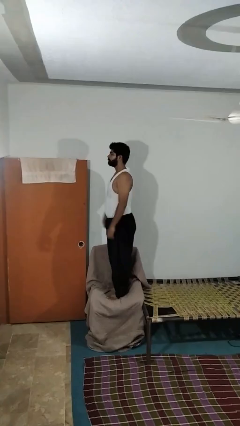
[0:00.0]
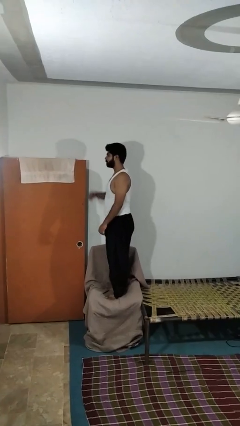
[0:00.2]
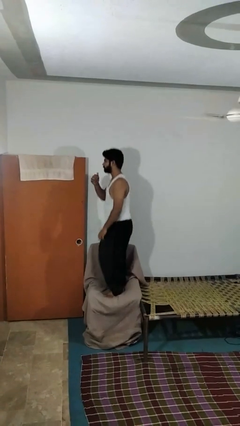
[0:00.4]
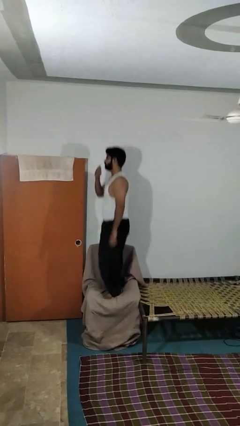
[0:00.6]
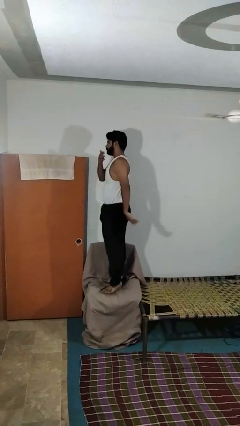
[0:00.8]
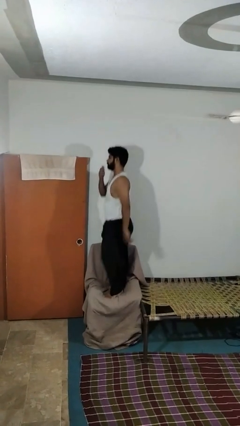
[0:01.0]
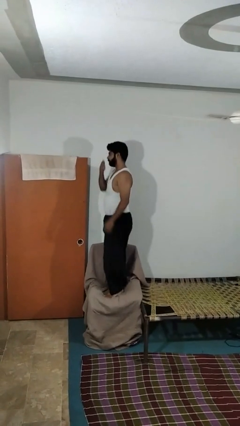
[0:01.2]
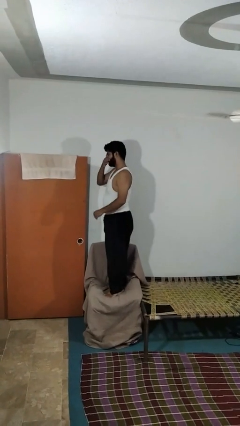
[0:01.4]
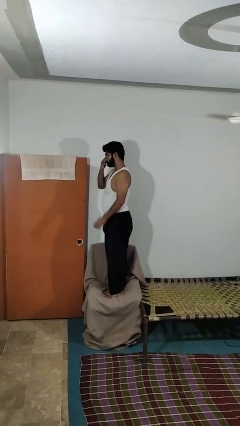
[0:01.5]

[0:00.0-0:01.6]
person jumps on couch

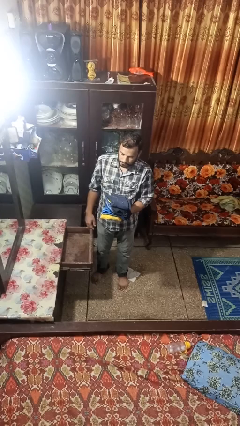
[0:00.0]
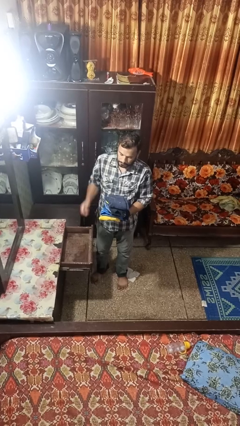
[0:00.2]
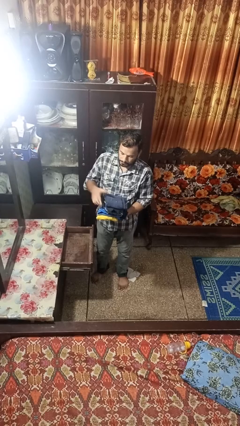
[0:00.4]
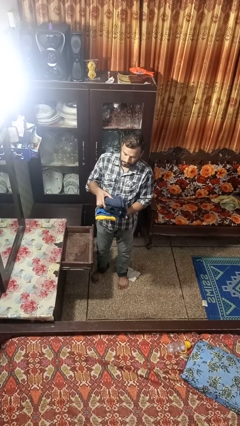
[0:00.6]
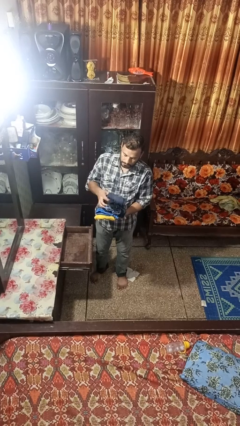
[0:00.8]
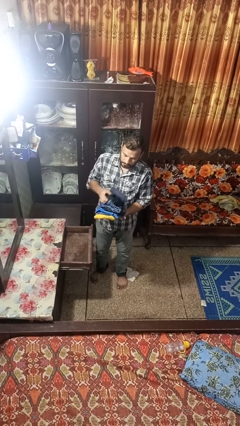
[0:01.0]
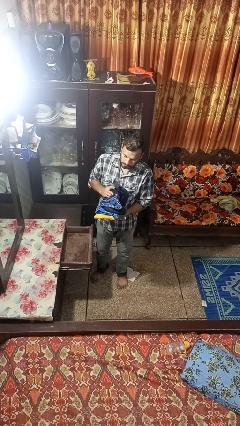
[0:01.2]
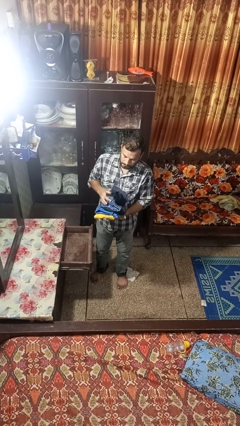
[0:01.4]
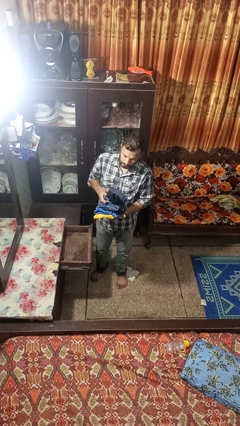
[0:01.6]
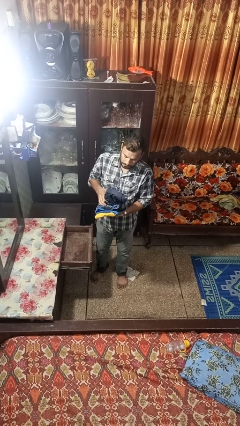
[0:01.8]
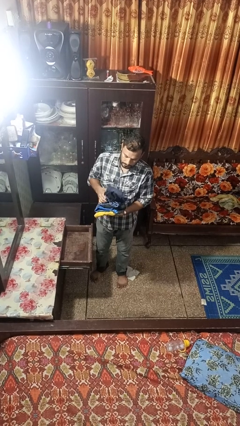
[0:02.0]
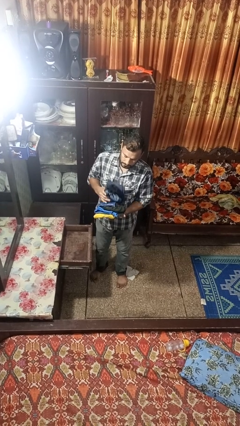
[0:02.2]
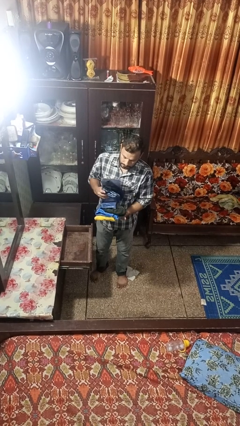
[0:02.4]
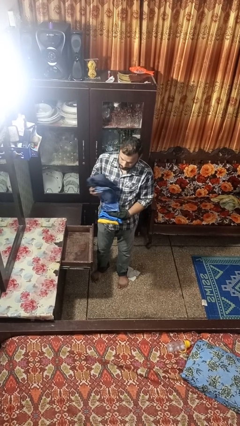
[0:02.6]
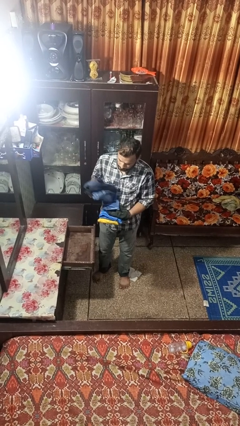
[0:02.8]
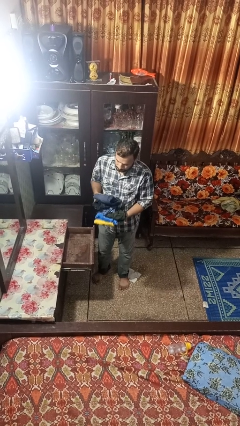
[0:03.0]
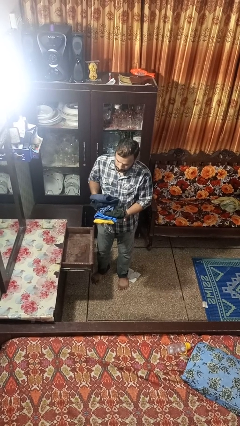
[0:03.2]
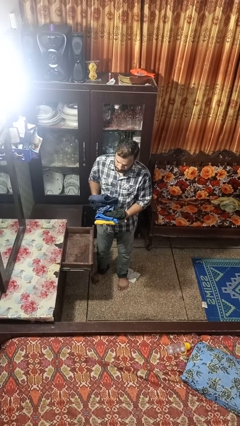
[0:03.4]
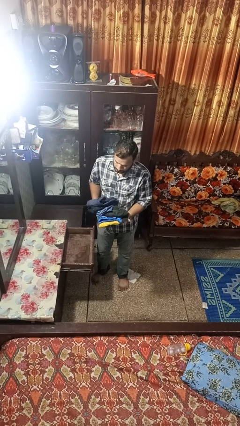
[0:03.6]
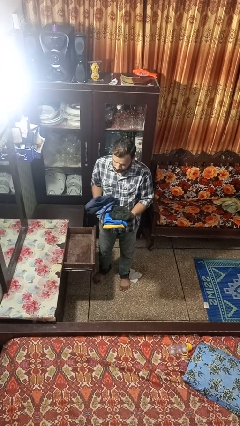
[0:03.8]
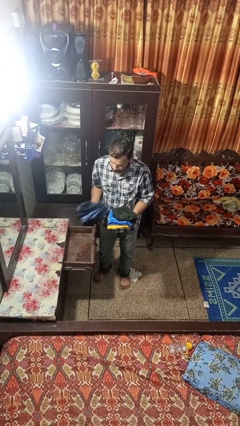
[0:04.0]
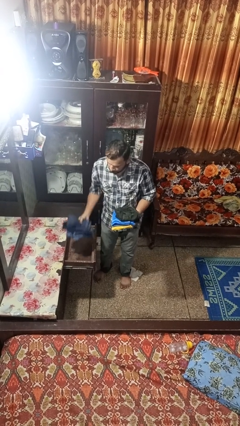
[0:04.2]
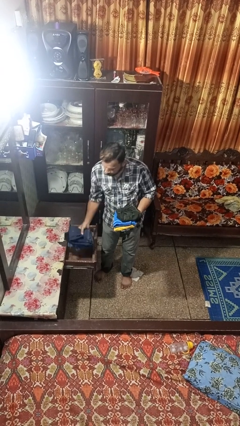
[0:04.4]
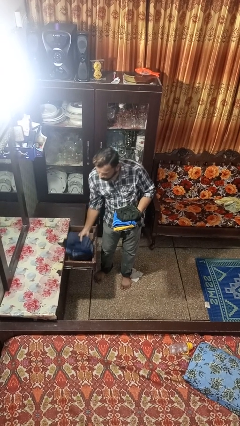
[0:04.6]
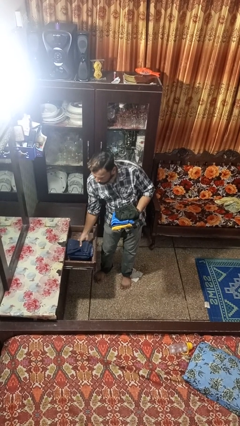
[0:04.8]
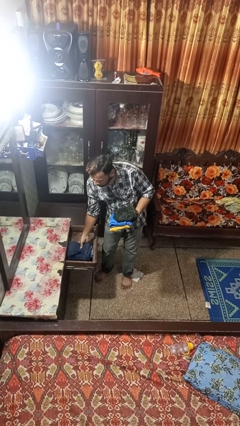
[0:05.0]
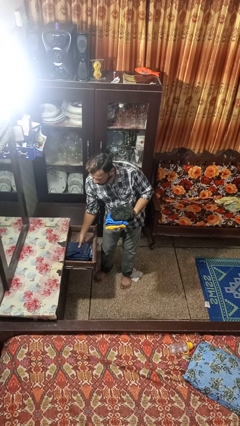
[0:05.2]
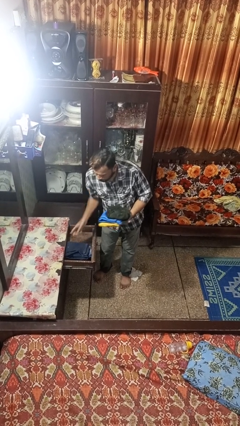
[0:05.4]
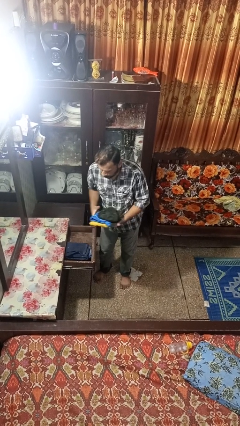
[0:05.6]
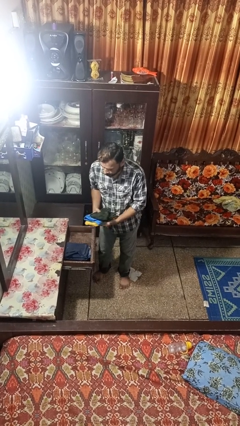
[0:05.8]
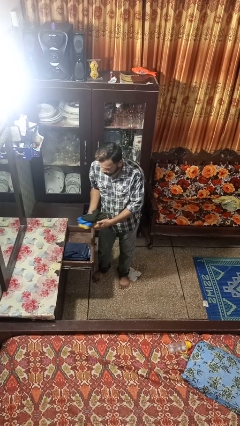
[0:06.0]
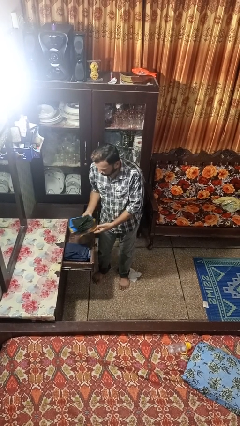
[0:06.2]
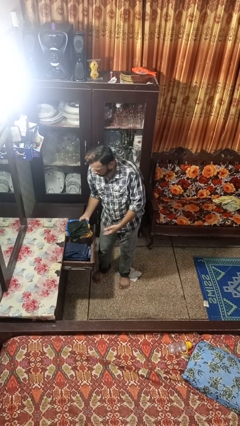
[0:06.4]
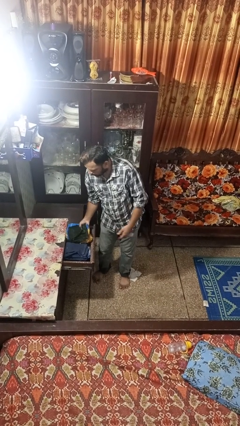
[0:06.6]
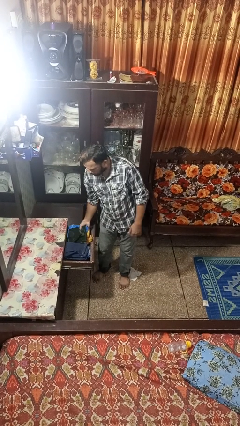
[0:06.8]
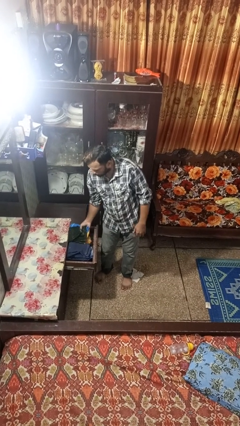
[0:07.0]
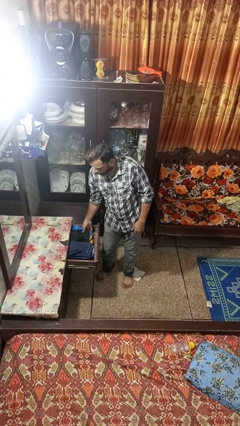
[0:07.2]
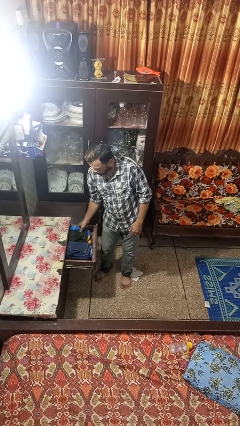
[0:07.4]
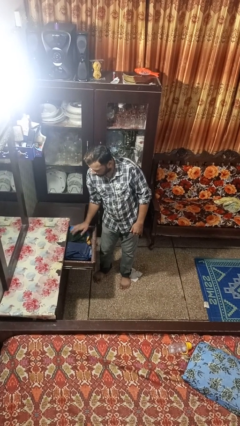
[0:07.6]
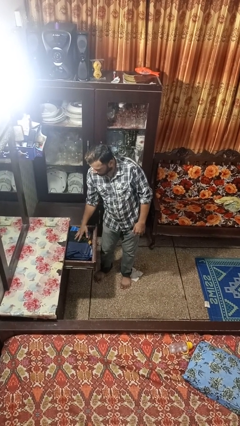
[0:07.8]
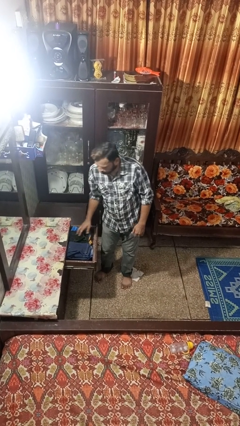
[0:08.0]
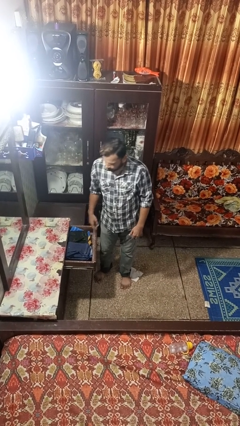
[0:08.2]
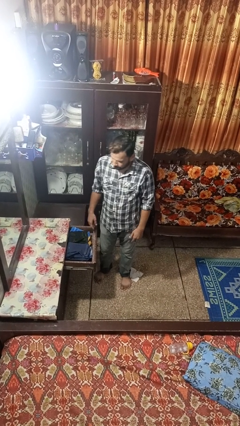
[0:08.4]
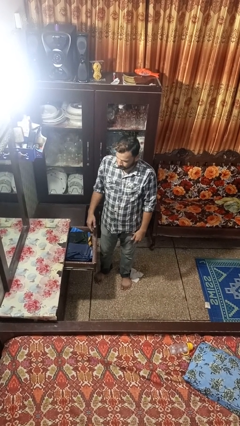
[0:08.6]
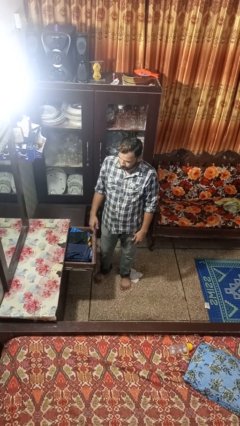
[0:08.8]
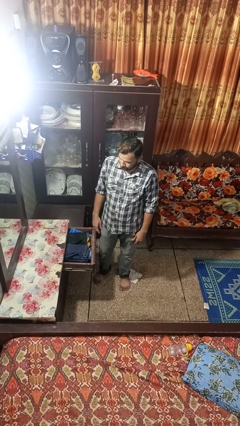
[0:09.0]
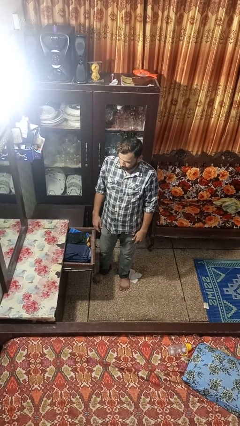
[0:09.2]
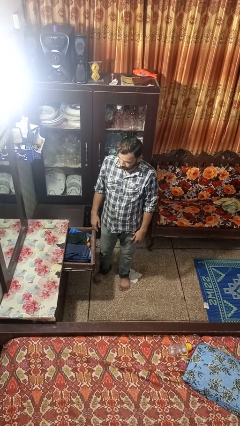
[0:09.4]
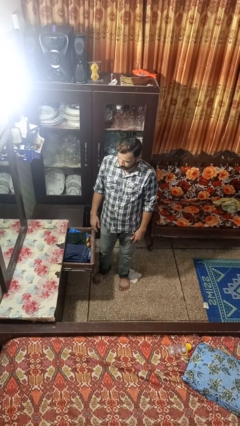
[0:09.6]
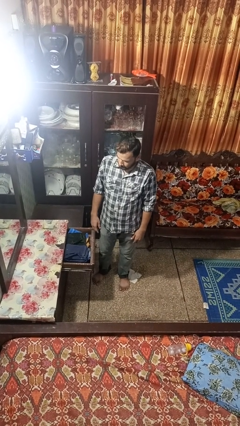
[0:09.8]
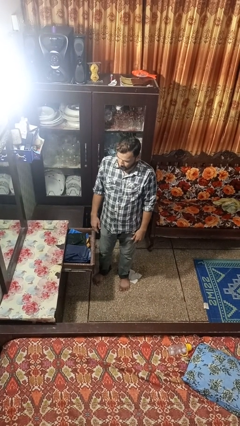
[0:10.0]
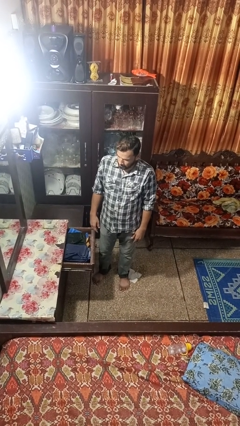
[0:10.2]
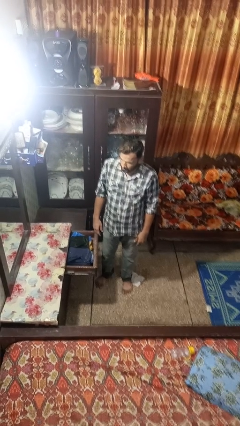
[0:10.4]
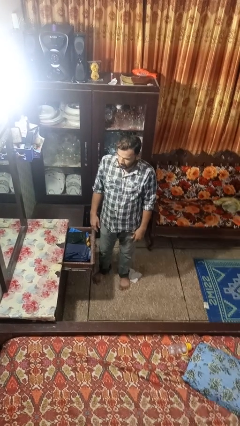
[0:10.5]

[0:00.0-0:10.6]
person puts clothes into dresser

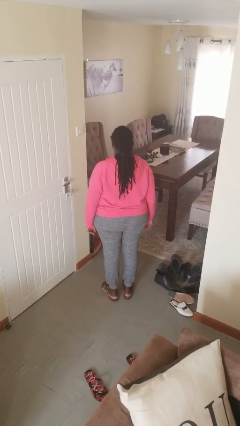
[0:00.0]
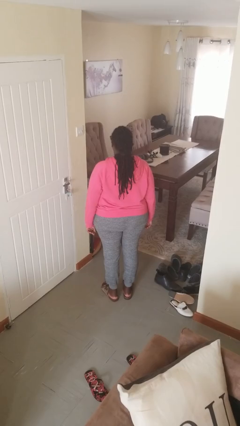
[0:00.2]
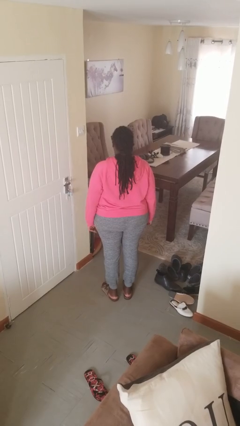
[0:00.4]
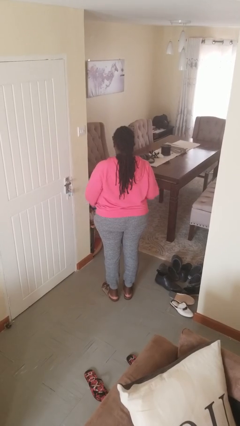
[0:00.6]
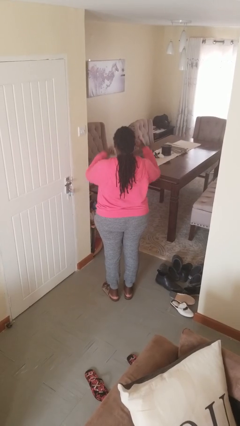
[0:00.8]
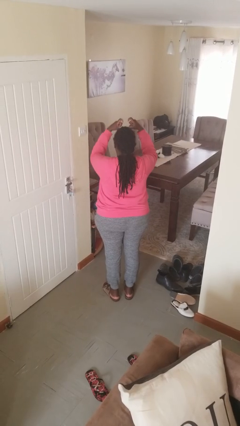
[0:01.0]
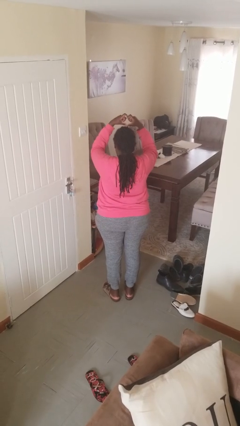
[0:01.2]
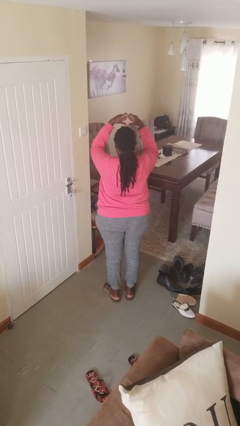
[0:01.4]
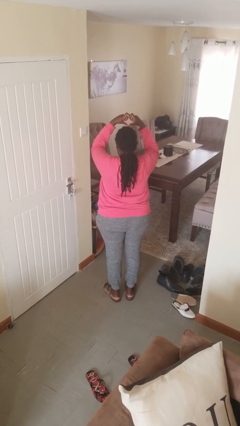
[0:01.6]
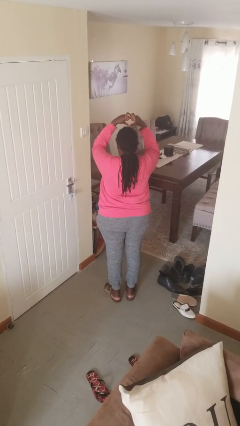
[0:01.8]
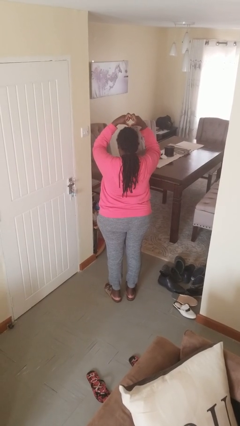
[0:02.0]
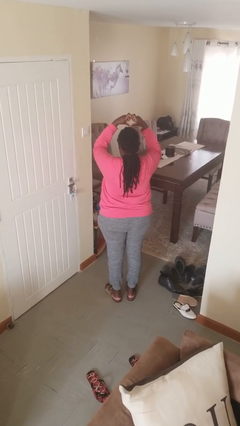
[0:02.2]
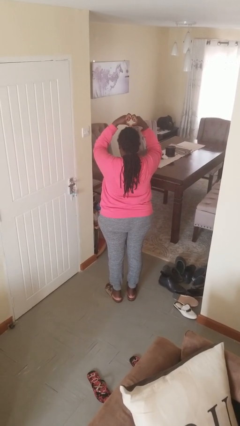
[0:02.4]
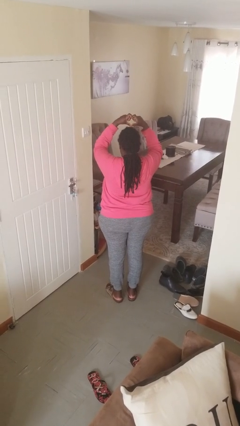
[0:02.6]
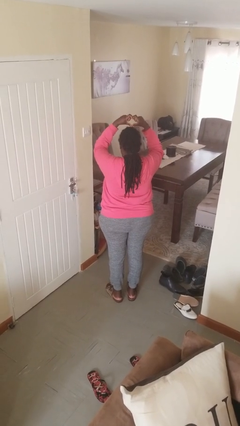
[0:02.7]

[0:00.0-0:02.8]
person gestures heart

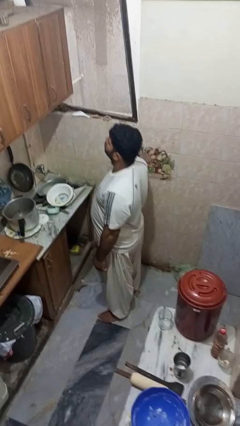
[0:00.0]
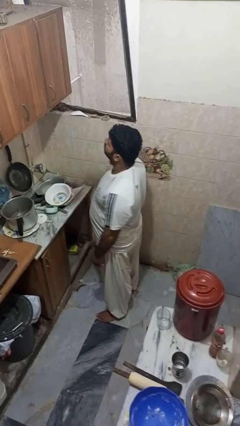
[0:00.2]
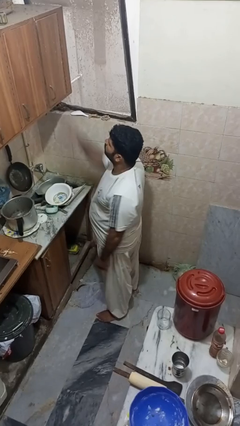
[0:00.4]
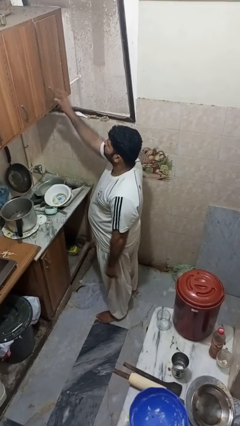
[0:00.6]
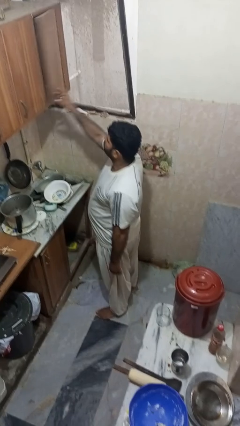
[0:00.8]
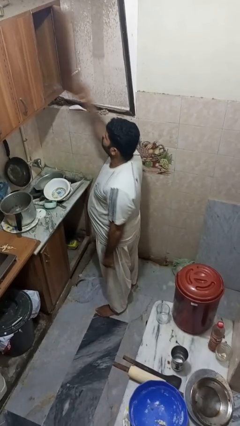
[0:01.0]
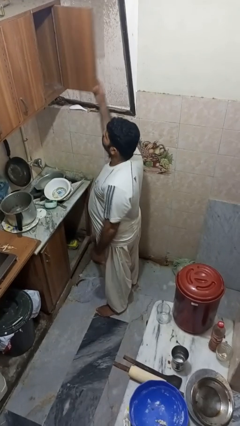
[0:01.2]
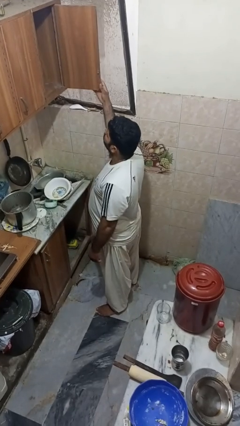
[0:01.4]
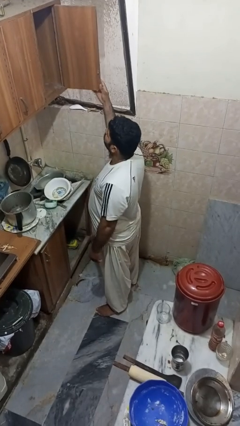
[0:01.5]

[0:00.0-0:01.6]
person opens cabinet

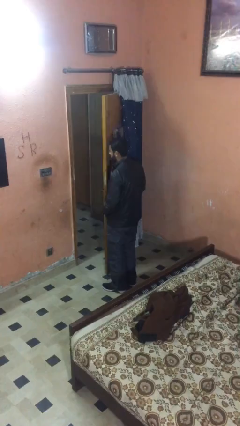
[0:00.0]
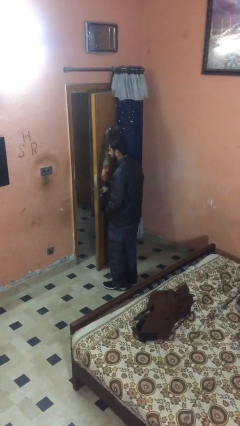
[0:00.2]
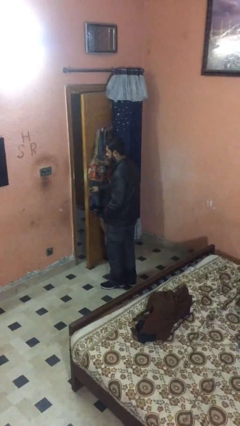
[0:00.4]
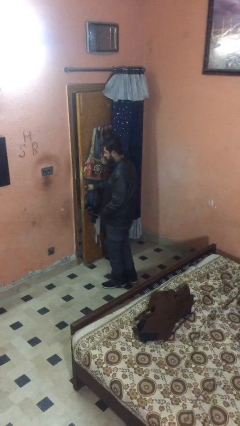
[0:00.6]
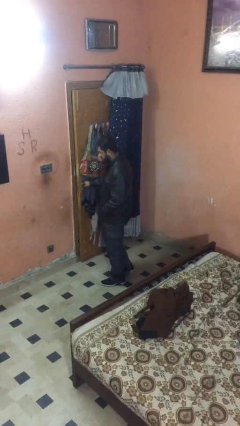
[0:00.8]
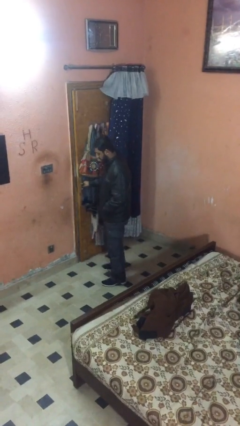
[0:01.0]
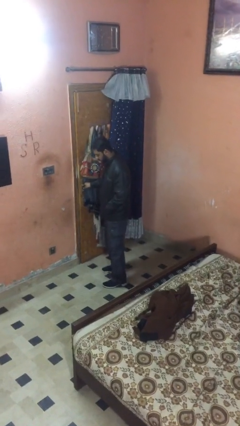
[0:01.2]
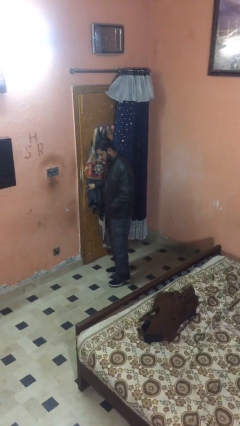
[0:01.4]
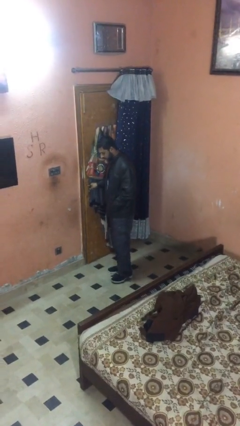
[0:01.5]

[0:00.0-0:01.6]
person closes facility door
